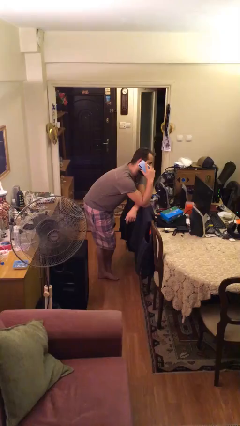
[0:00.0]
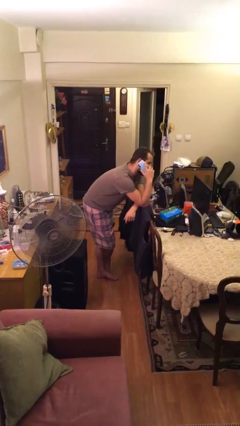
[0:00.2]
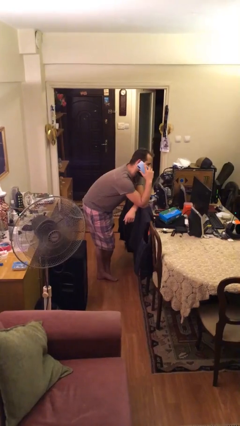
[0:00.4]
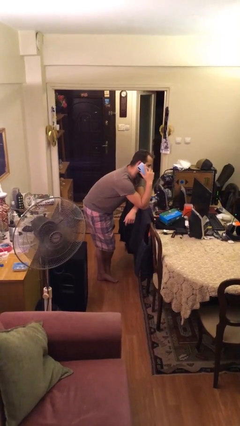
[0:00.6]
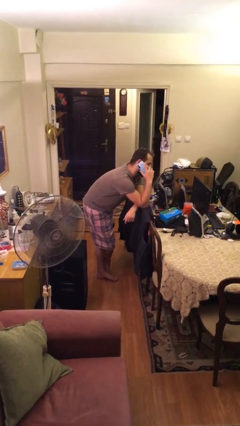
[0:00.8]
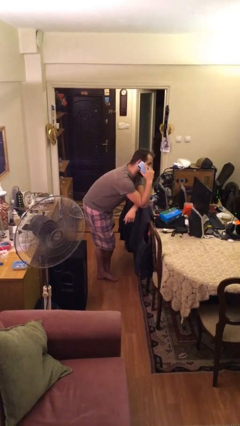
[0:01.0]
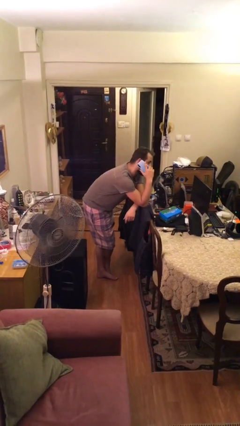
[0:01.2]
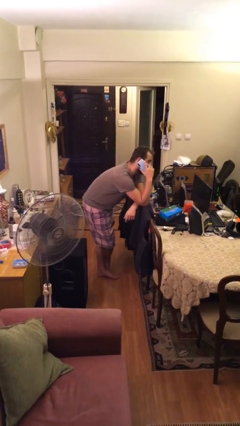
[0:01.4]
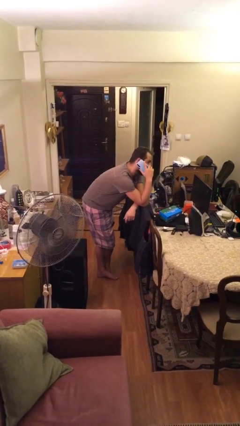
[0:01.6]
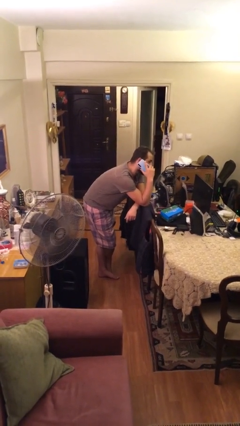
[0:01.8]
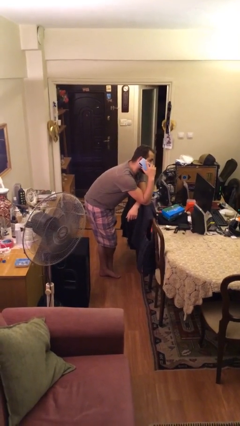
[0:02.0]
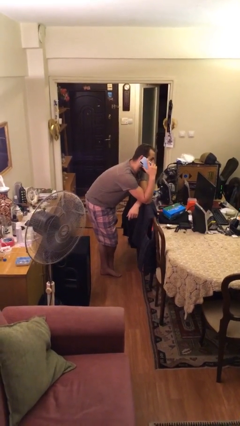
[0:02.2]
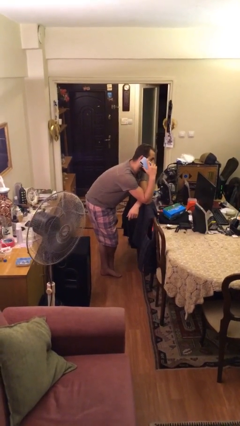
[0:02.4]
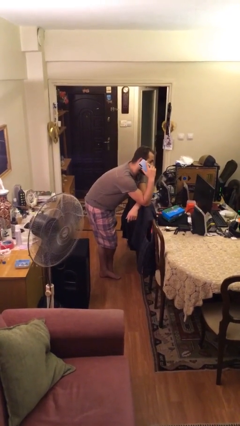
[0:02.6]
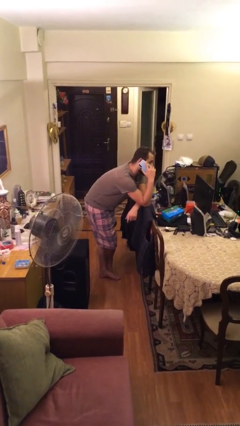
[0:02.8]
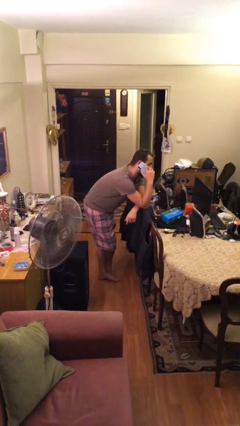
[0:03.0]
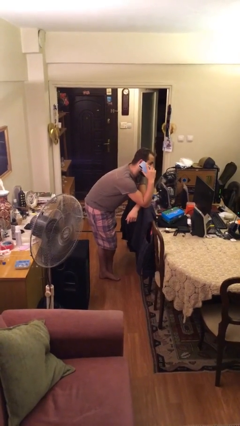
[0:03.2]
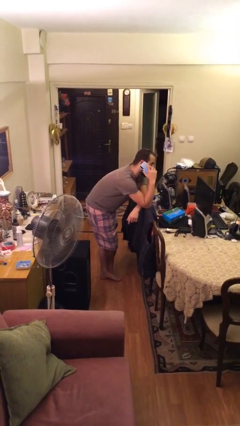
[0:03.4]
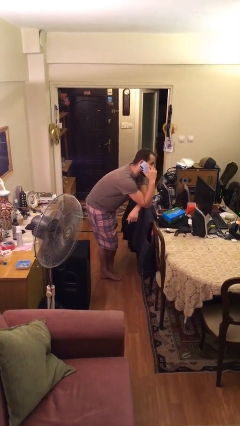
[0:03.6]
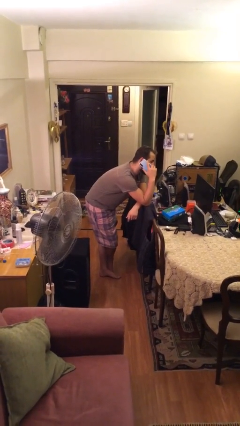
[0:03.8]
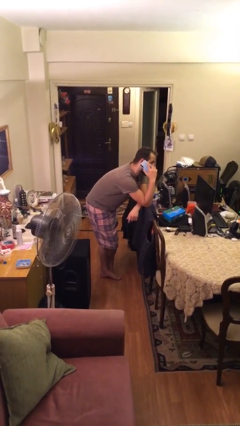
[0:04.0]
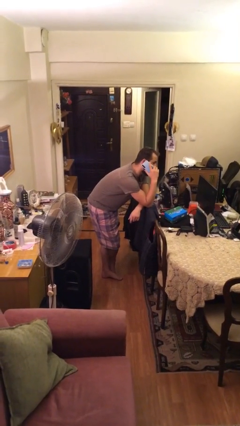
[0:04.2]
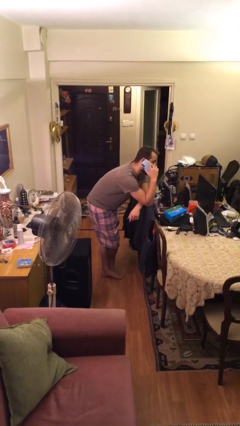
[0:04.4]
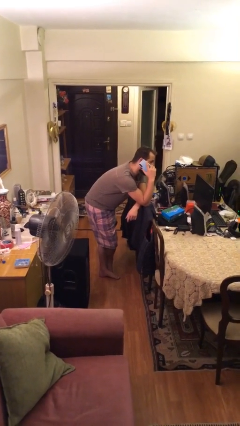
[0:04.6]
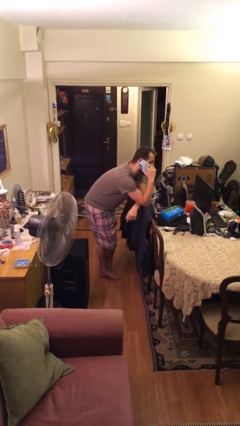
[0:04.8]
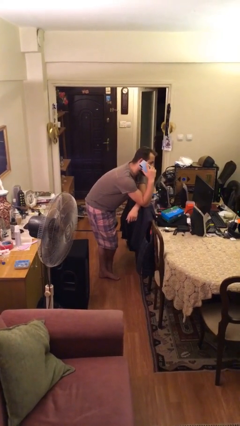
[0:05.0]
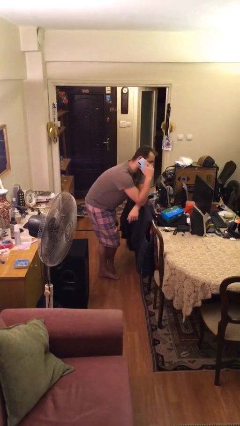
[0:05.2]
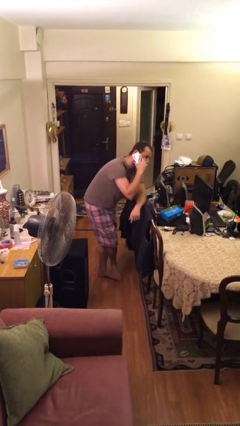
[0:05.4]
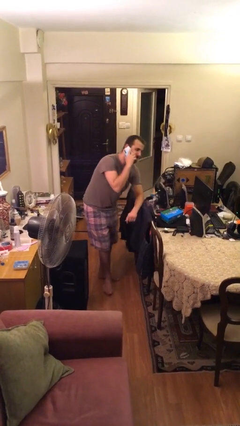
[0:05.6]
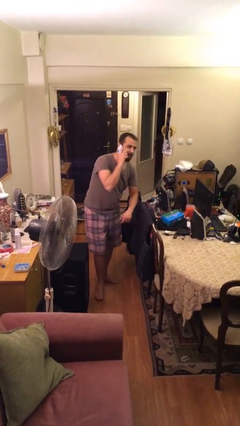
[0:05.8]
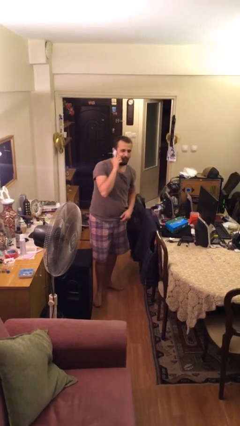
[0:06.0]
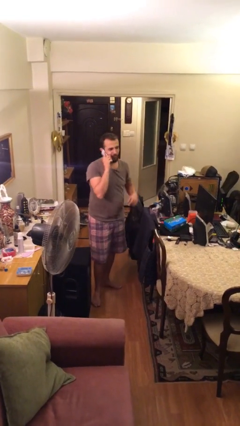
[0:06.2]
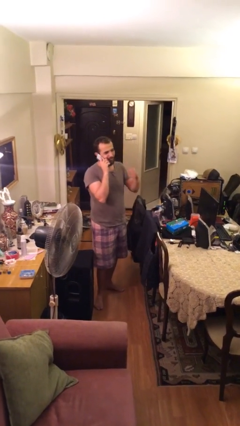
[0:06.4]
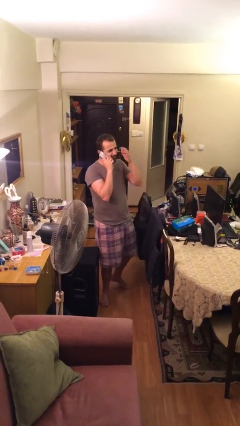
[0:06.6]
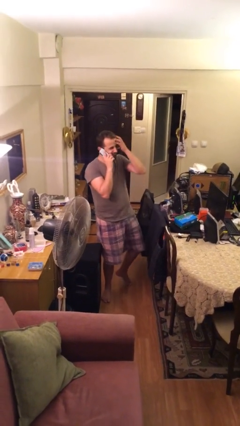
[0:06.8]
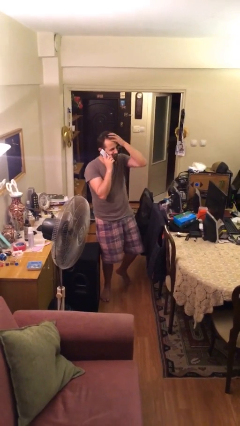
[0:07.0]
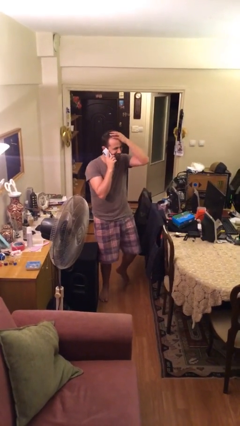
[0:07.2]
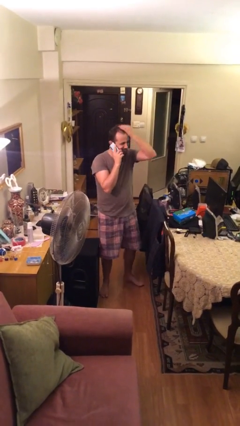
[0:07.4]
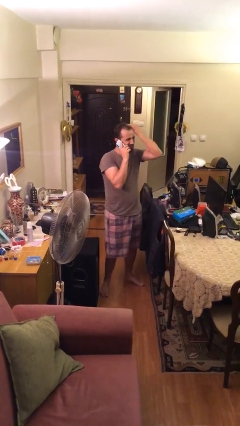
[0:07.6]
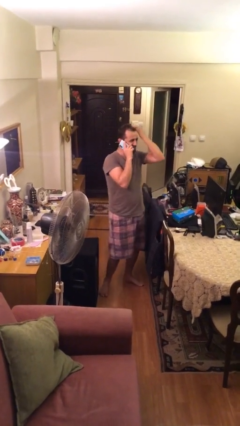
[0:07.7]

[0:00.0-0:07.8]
person talks on phone

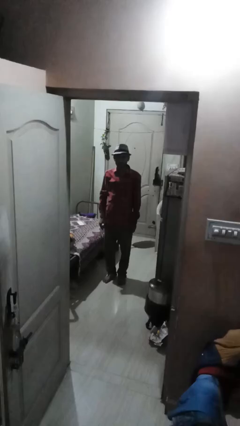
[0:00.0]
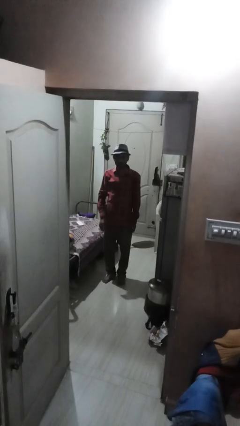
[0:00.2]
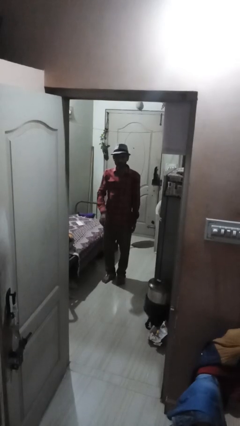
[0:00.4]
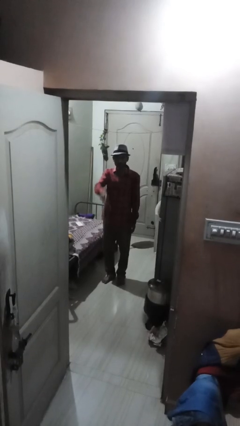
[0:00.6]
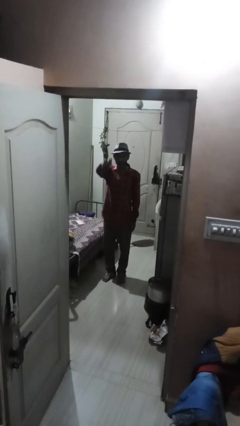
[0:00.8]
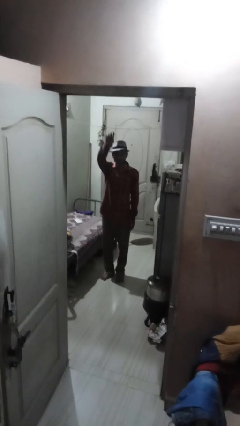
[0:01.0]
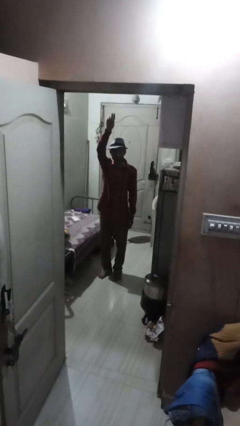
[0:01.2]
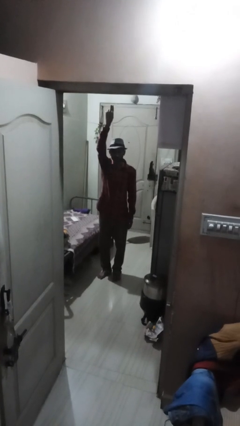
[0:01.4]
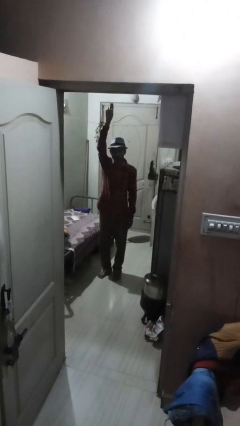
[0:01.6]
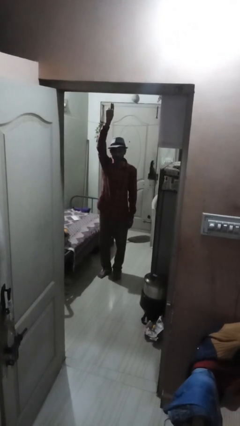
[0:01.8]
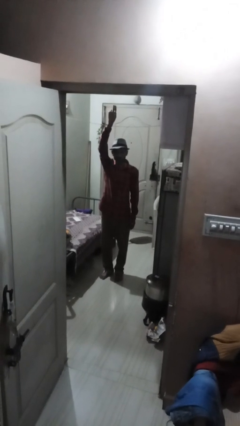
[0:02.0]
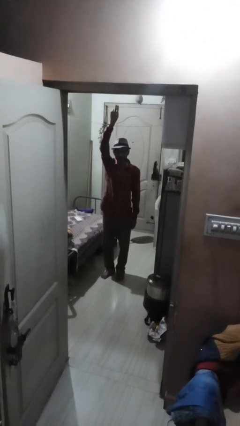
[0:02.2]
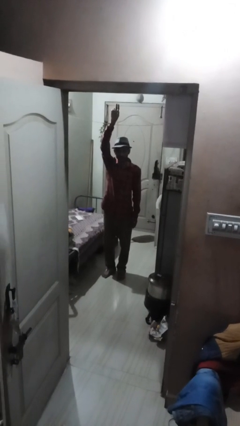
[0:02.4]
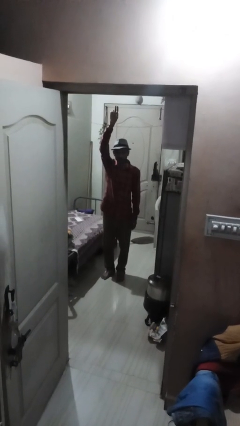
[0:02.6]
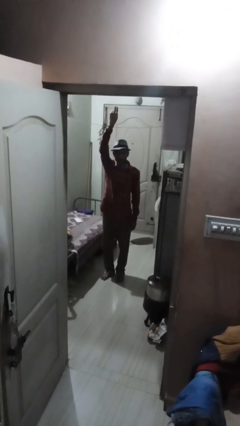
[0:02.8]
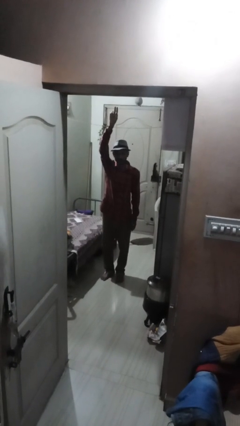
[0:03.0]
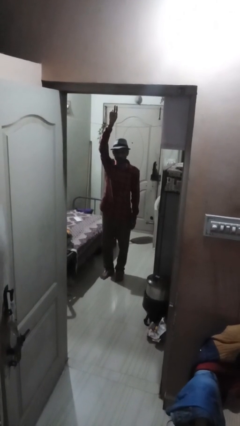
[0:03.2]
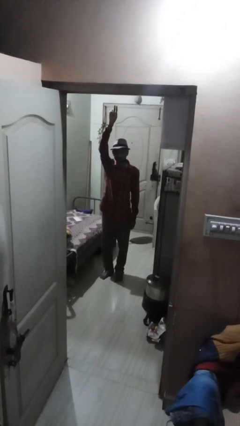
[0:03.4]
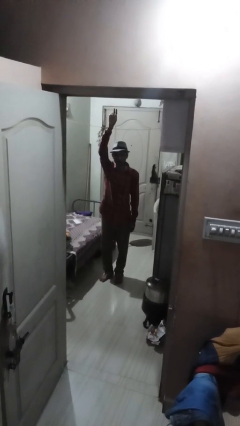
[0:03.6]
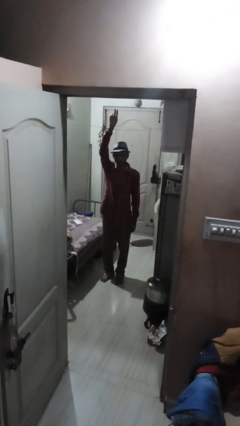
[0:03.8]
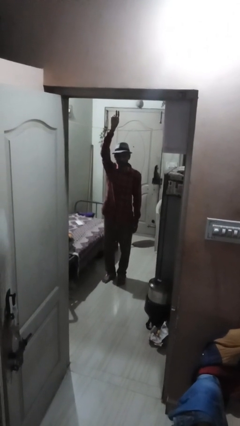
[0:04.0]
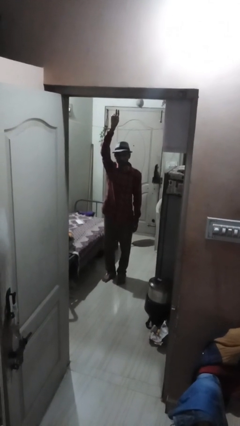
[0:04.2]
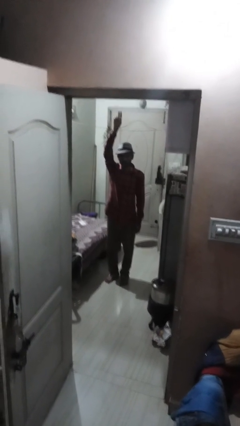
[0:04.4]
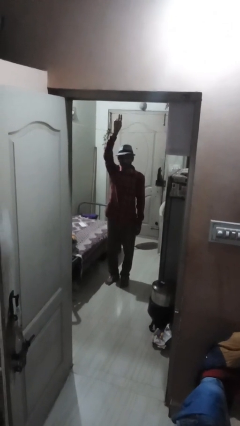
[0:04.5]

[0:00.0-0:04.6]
person gestures swipe up

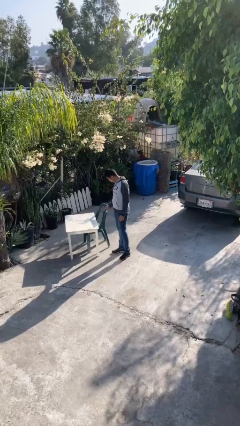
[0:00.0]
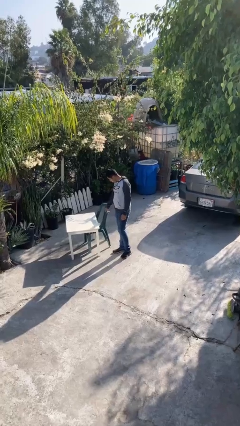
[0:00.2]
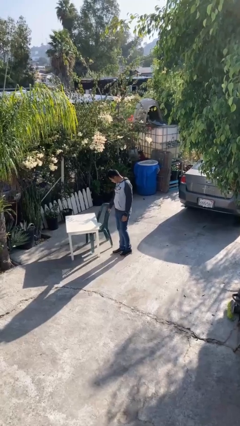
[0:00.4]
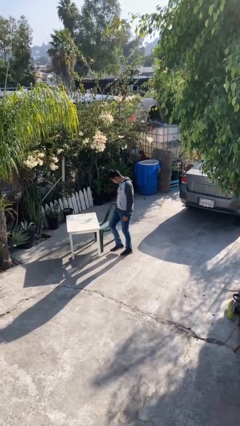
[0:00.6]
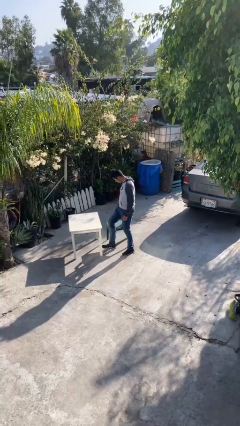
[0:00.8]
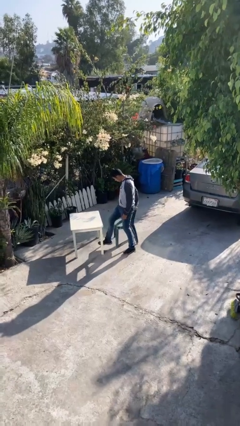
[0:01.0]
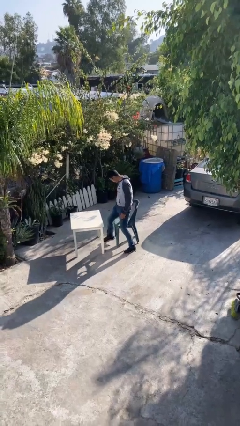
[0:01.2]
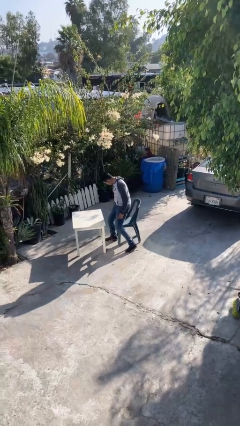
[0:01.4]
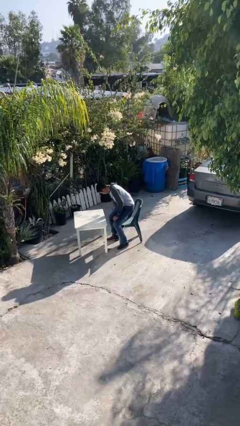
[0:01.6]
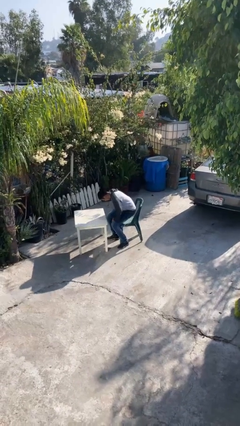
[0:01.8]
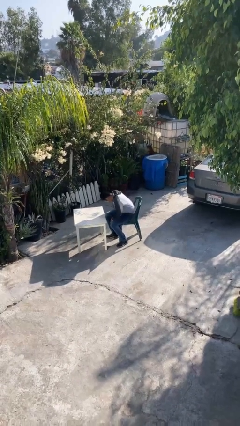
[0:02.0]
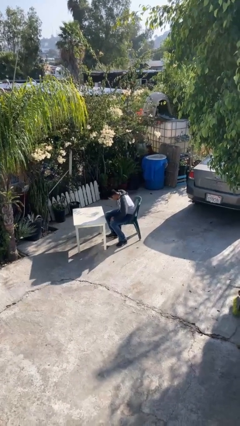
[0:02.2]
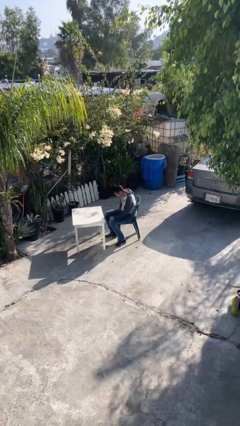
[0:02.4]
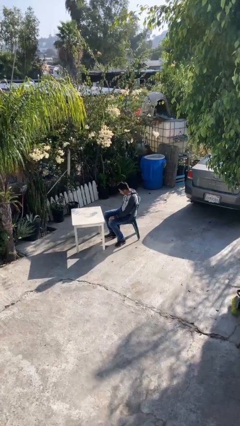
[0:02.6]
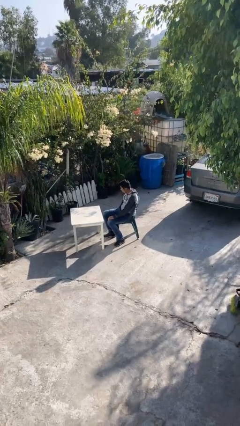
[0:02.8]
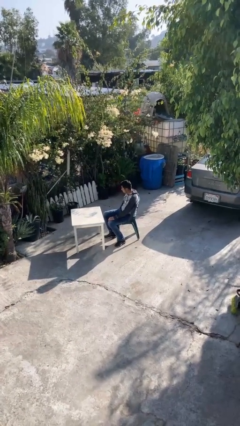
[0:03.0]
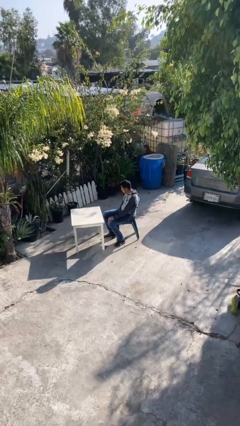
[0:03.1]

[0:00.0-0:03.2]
person sits down

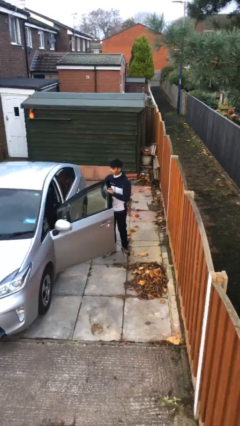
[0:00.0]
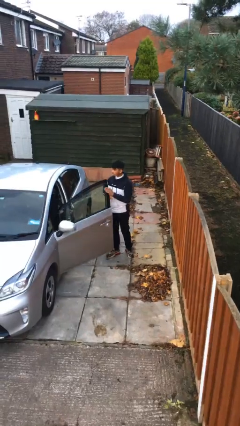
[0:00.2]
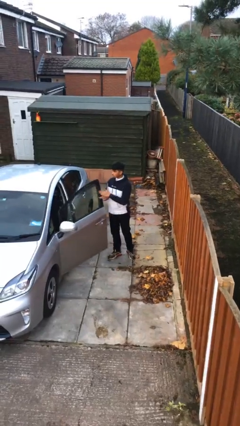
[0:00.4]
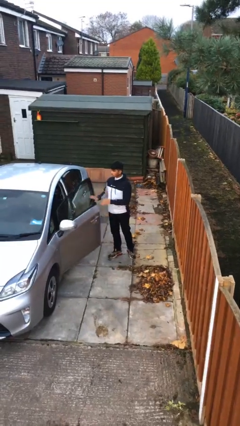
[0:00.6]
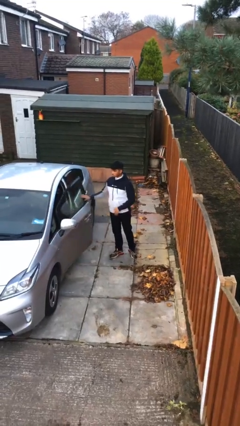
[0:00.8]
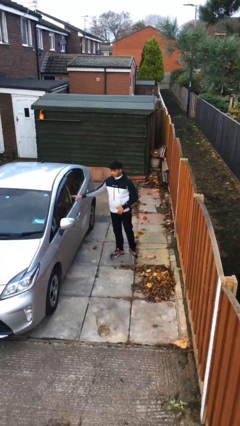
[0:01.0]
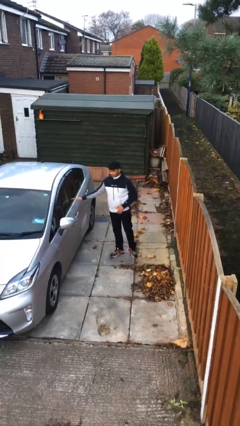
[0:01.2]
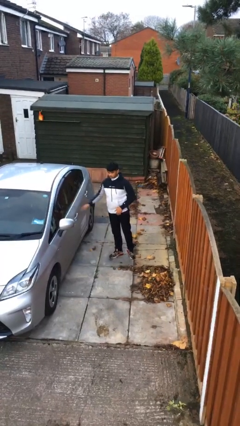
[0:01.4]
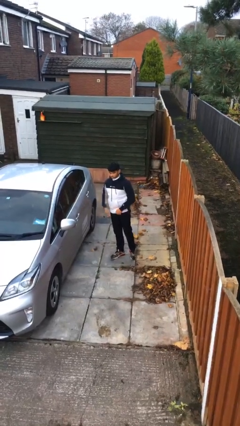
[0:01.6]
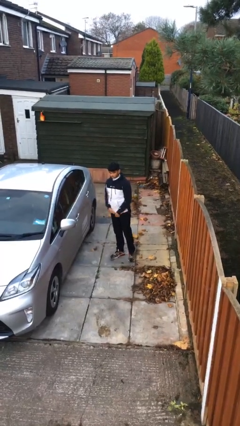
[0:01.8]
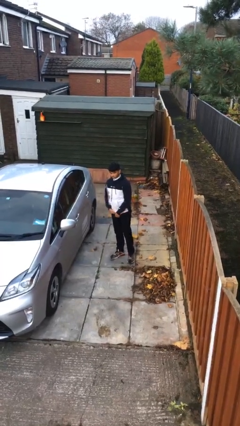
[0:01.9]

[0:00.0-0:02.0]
person closes car door
